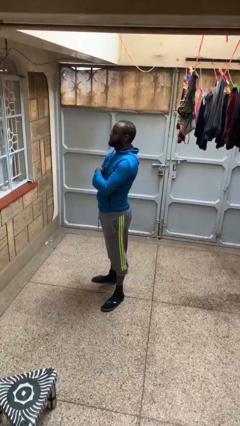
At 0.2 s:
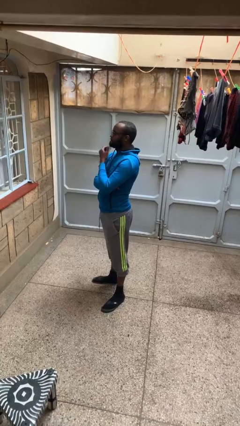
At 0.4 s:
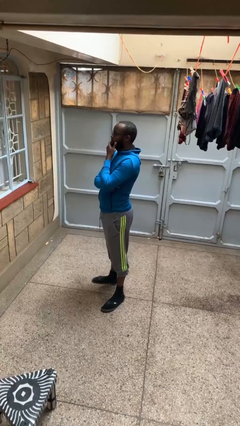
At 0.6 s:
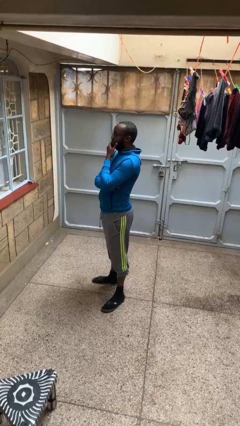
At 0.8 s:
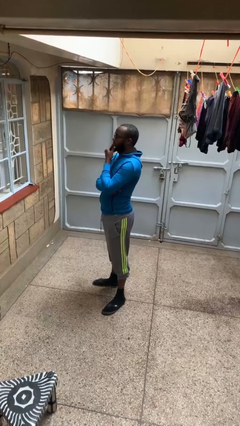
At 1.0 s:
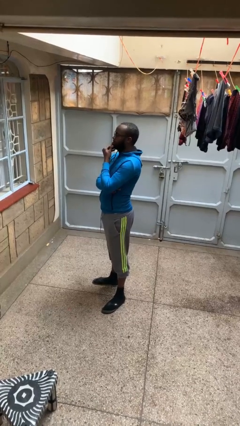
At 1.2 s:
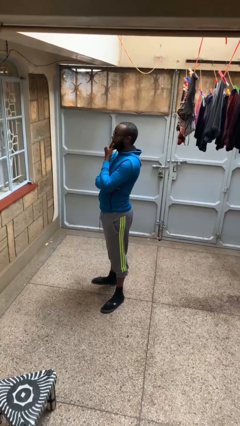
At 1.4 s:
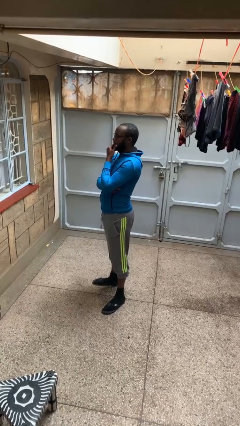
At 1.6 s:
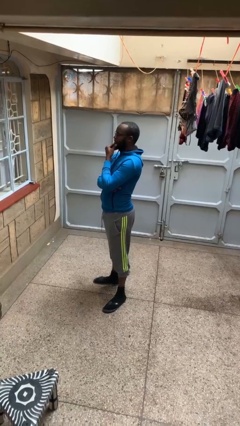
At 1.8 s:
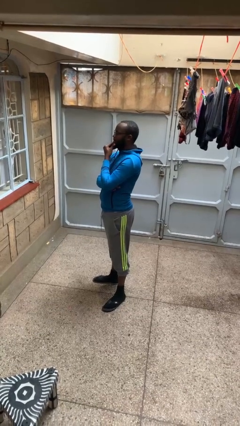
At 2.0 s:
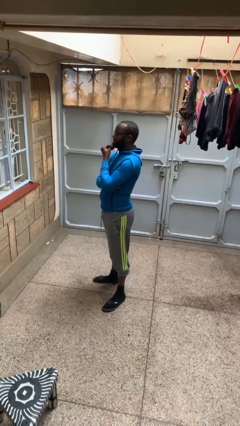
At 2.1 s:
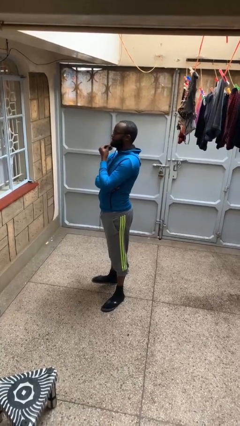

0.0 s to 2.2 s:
person strokes chin

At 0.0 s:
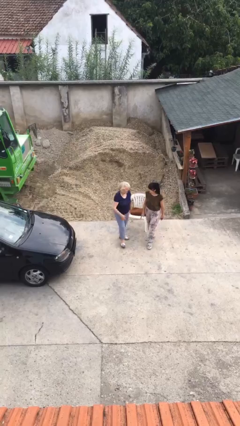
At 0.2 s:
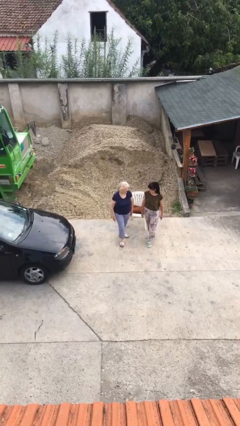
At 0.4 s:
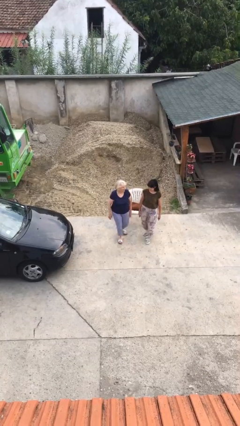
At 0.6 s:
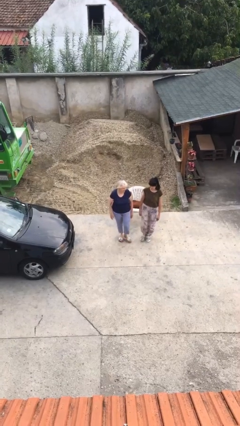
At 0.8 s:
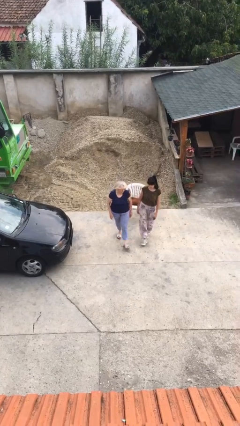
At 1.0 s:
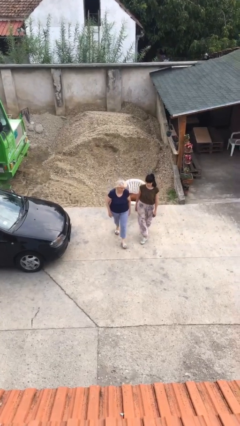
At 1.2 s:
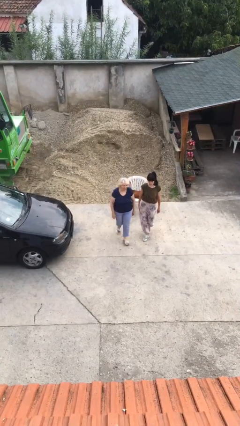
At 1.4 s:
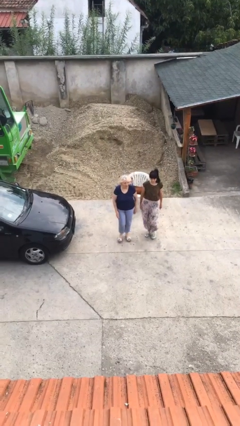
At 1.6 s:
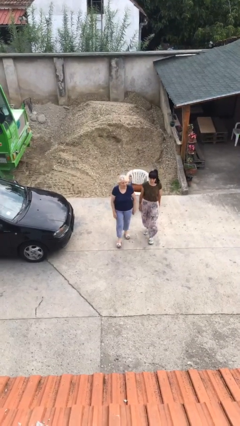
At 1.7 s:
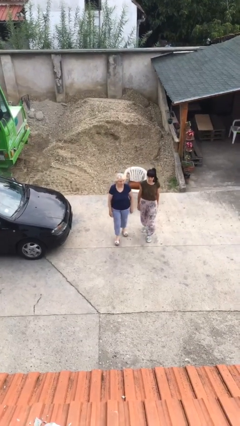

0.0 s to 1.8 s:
person talks to person

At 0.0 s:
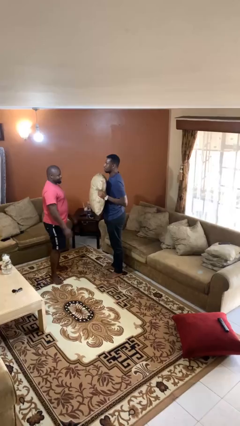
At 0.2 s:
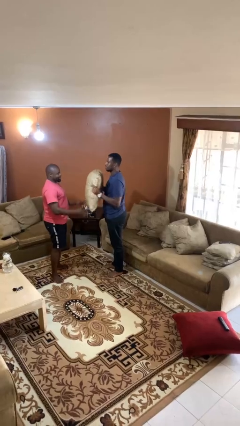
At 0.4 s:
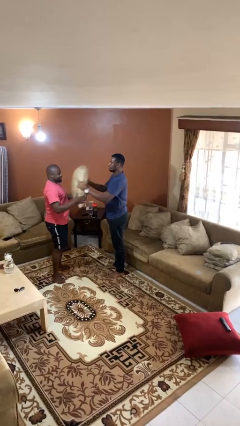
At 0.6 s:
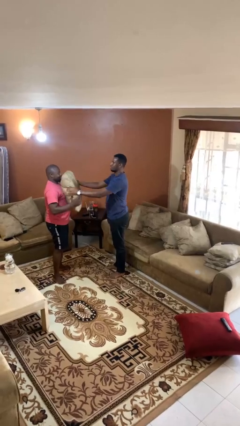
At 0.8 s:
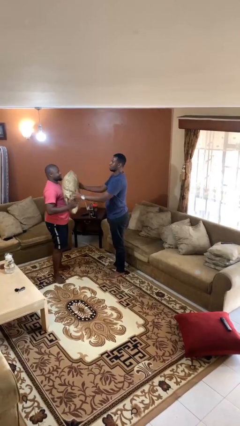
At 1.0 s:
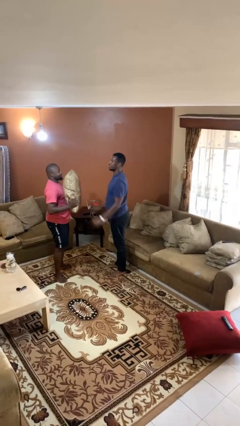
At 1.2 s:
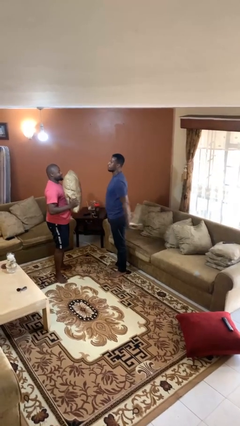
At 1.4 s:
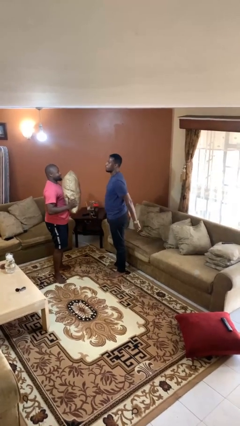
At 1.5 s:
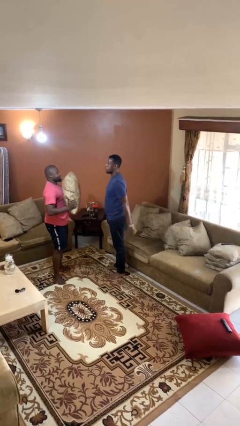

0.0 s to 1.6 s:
person transfers object to person

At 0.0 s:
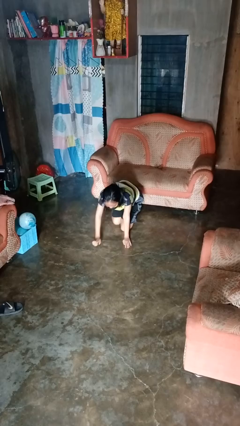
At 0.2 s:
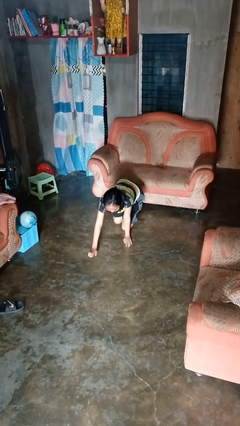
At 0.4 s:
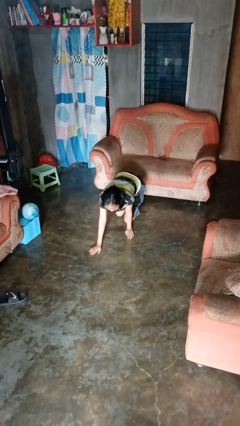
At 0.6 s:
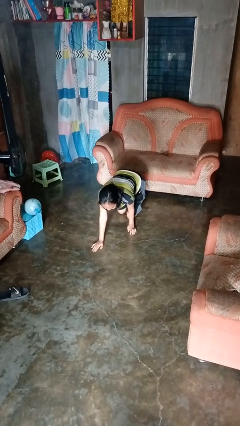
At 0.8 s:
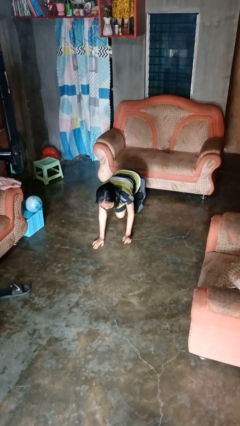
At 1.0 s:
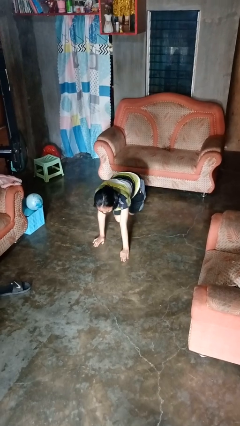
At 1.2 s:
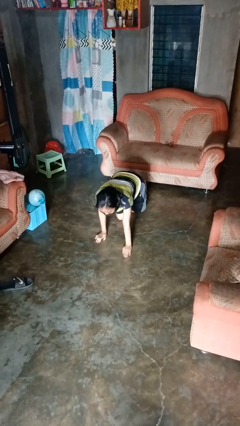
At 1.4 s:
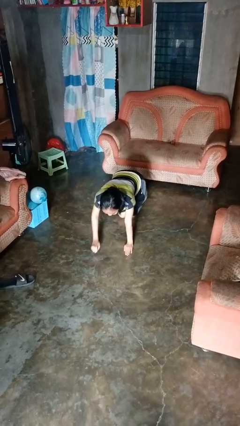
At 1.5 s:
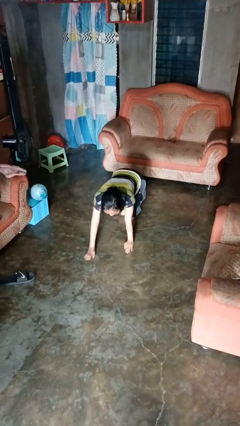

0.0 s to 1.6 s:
person crawls

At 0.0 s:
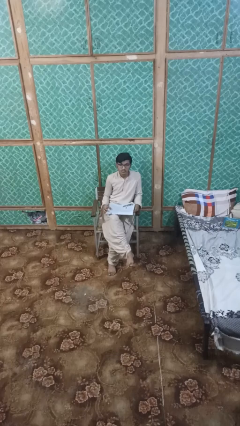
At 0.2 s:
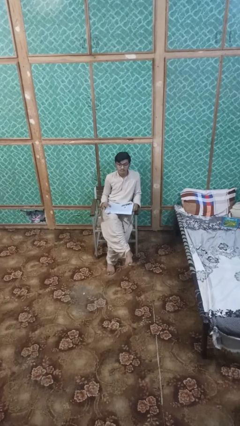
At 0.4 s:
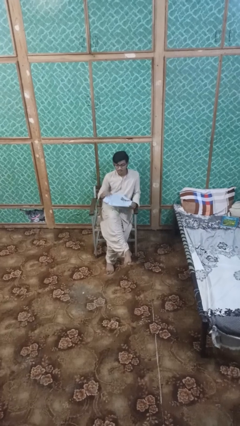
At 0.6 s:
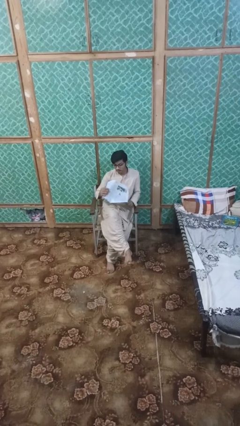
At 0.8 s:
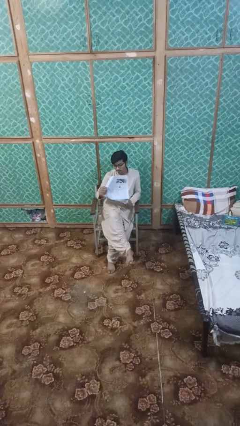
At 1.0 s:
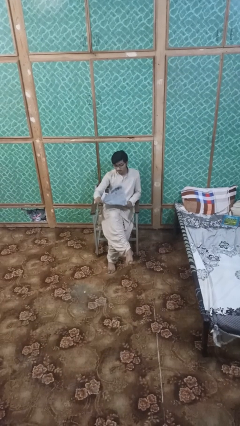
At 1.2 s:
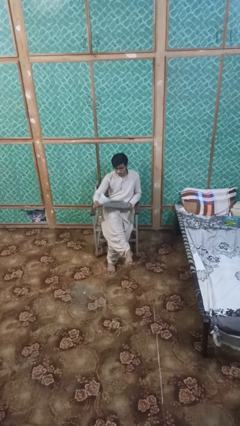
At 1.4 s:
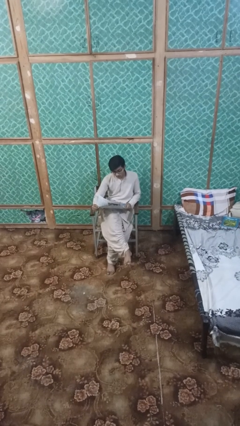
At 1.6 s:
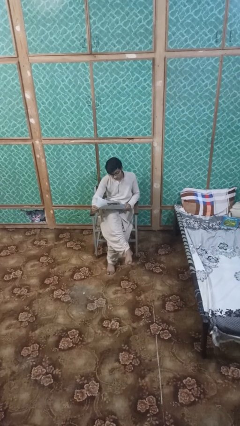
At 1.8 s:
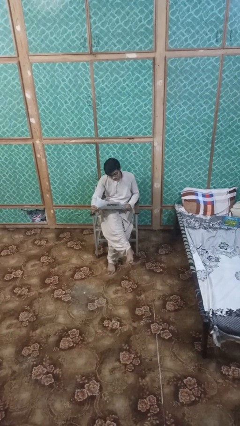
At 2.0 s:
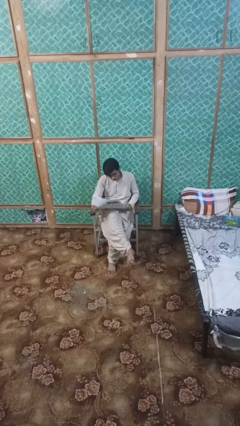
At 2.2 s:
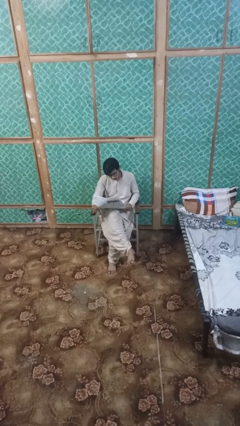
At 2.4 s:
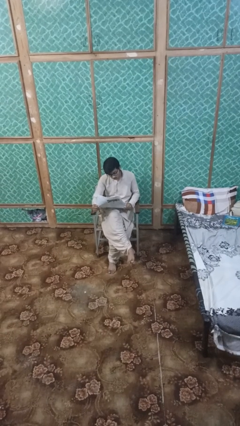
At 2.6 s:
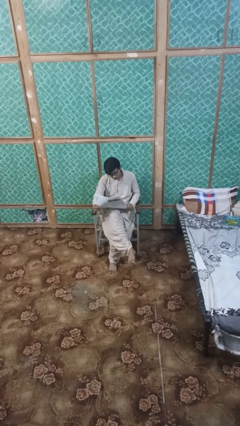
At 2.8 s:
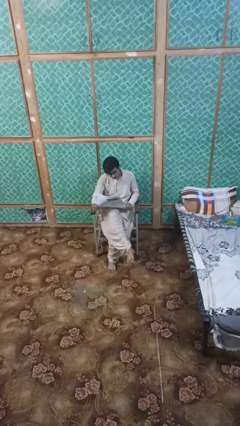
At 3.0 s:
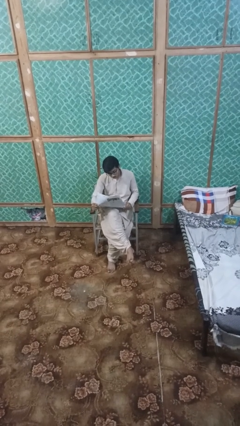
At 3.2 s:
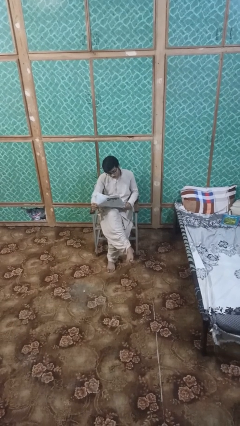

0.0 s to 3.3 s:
person reads newspaper

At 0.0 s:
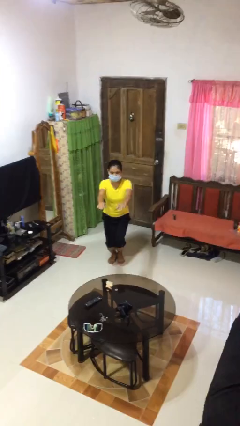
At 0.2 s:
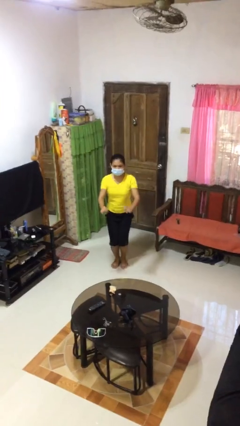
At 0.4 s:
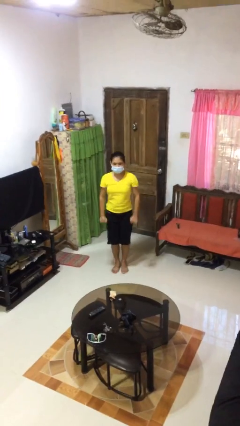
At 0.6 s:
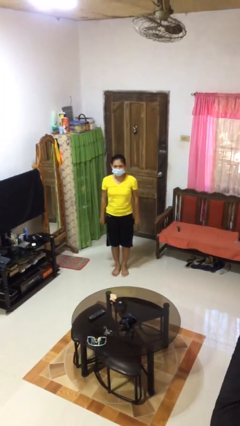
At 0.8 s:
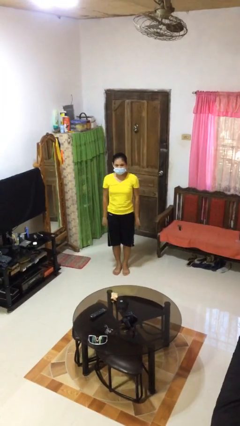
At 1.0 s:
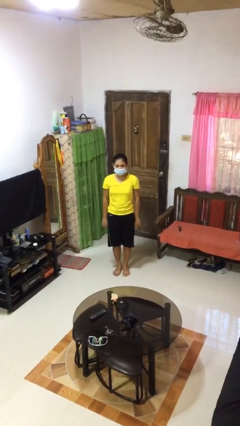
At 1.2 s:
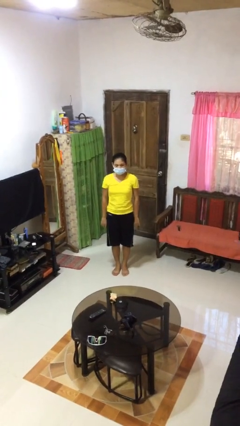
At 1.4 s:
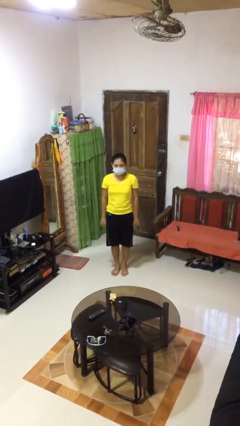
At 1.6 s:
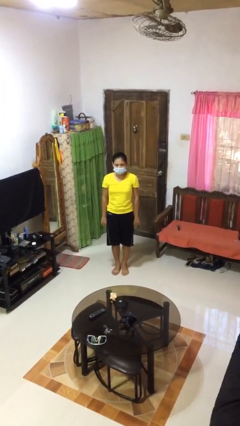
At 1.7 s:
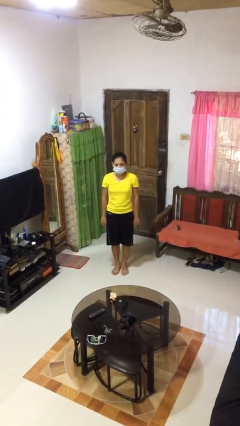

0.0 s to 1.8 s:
person stands up

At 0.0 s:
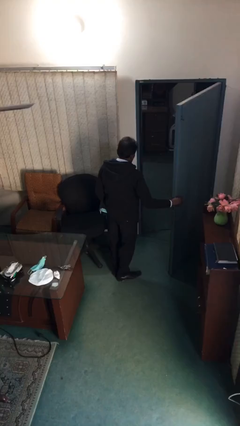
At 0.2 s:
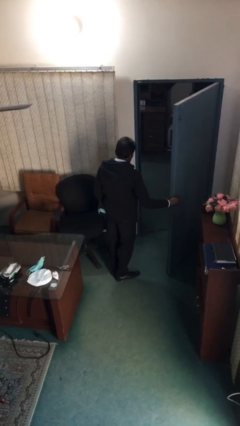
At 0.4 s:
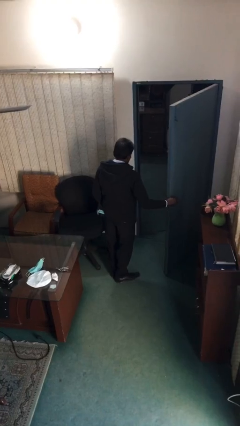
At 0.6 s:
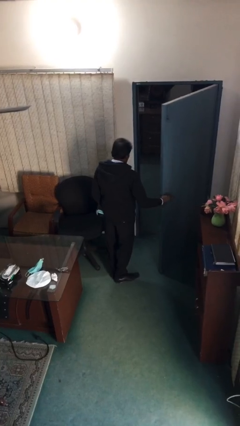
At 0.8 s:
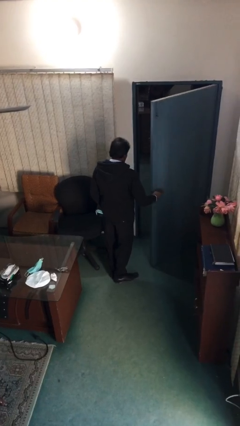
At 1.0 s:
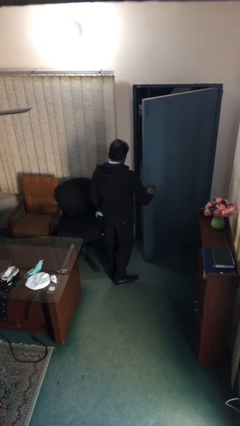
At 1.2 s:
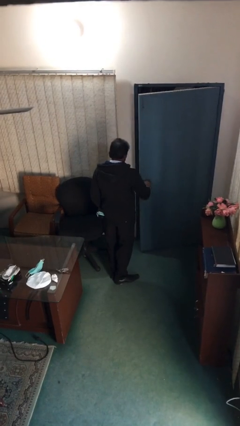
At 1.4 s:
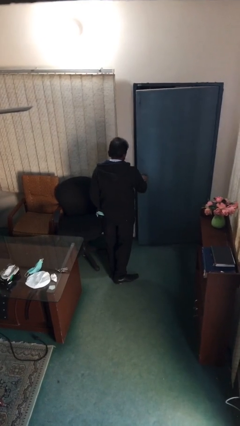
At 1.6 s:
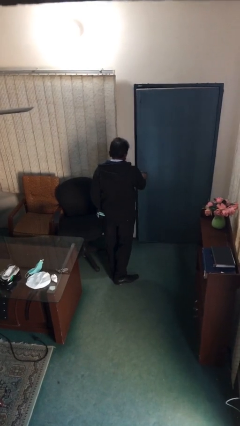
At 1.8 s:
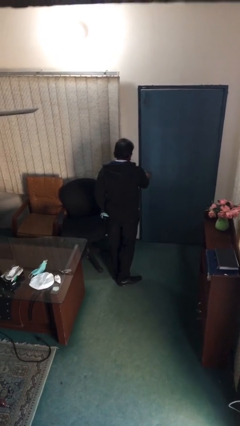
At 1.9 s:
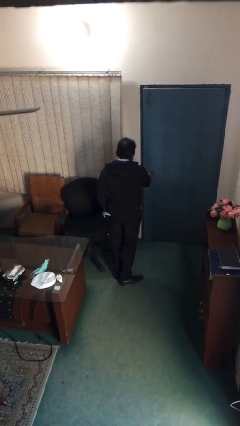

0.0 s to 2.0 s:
person closes facility door

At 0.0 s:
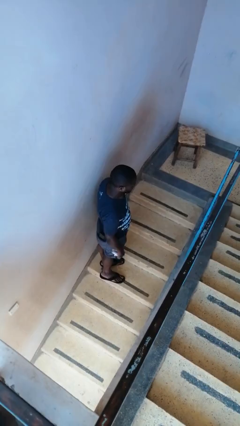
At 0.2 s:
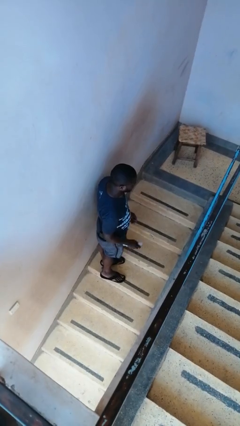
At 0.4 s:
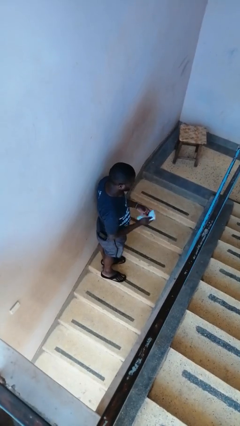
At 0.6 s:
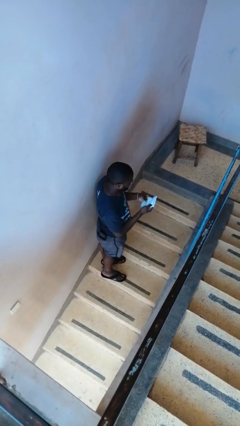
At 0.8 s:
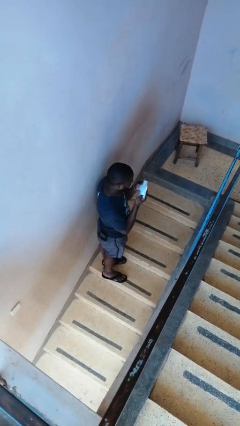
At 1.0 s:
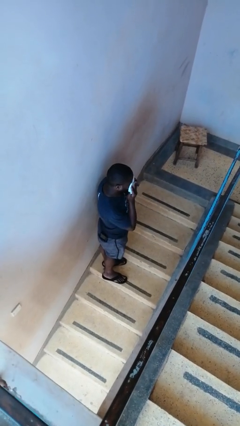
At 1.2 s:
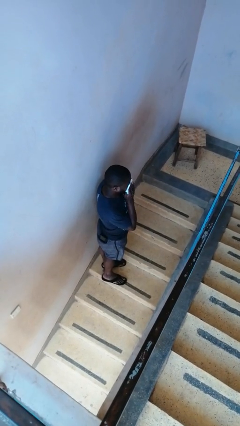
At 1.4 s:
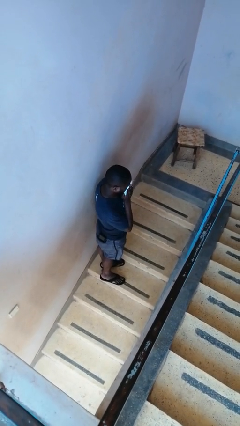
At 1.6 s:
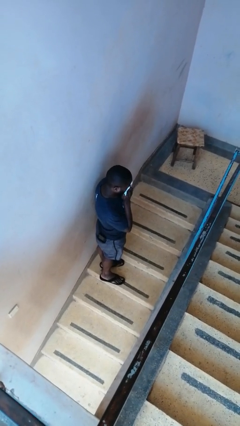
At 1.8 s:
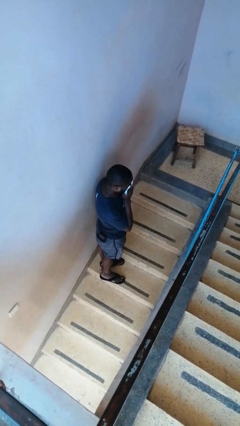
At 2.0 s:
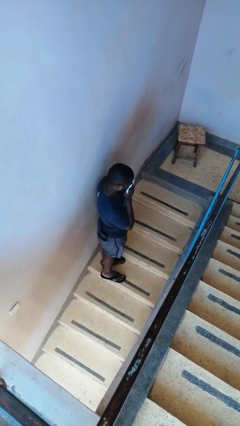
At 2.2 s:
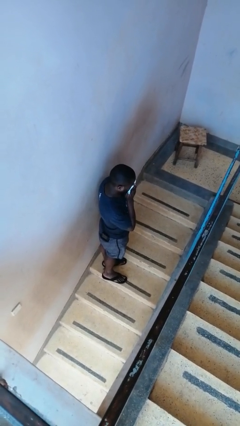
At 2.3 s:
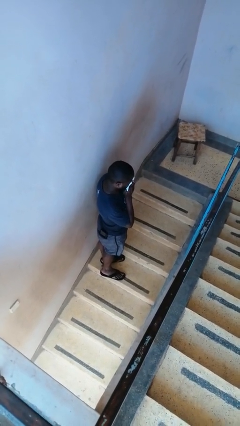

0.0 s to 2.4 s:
person blows nose
